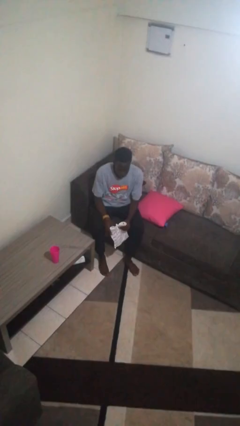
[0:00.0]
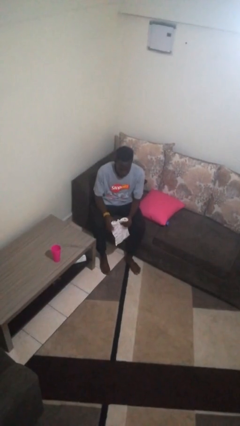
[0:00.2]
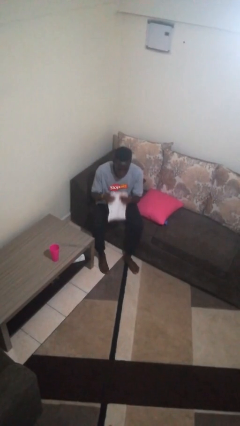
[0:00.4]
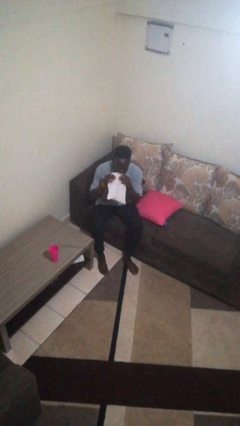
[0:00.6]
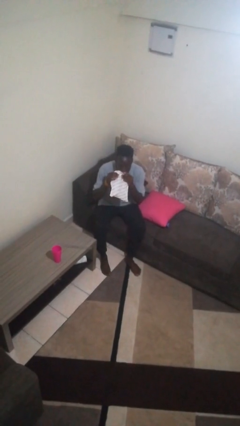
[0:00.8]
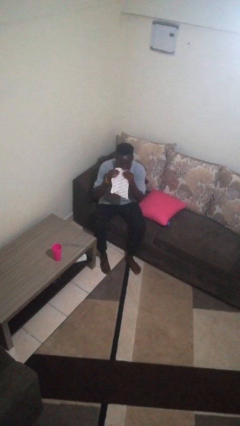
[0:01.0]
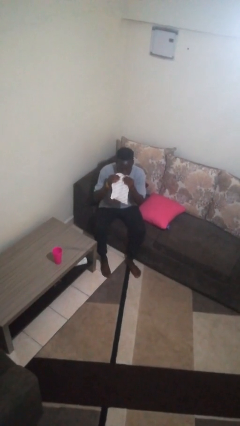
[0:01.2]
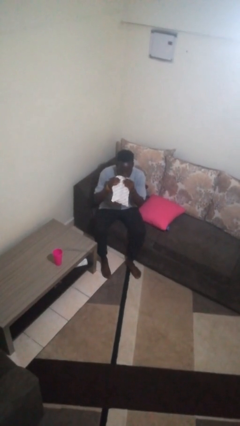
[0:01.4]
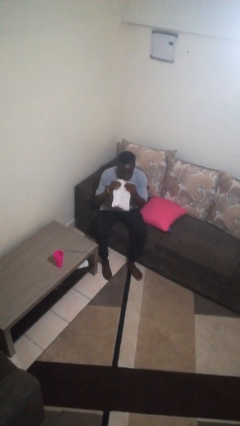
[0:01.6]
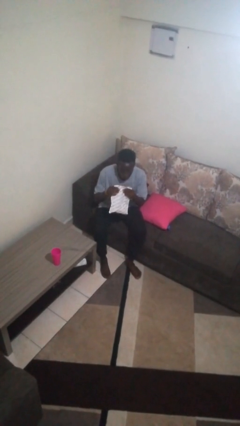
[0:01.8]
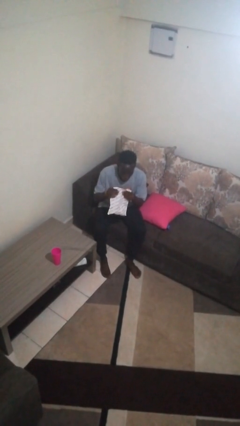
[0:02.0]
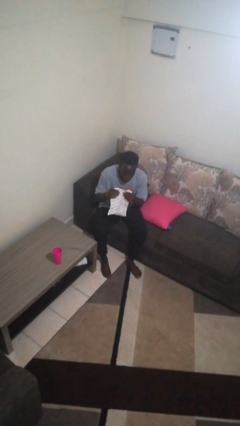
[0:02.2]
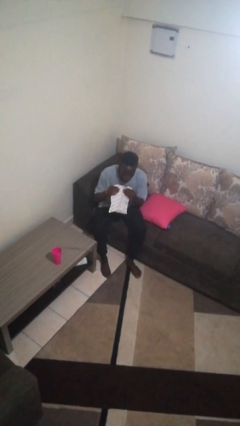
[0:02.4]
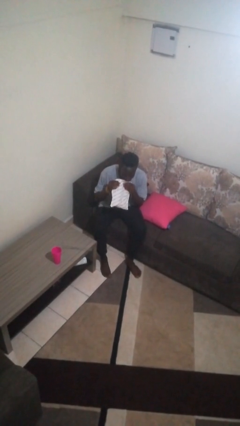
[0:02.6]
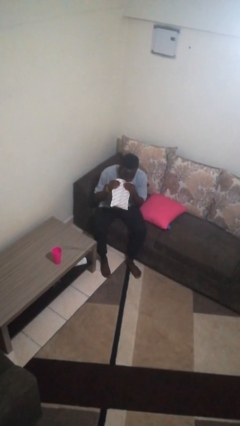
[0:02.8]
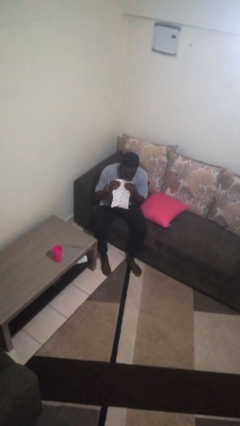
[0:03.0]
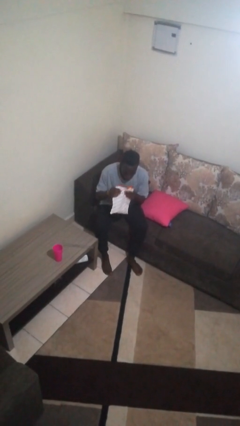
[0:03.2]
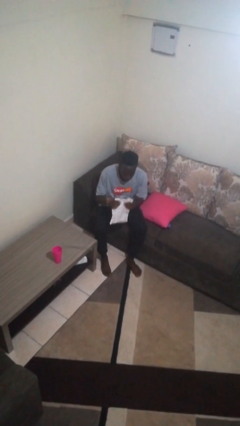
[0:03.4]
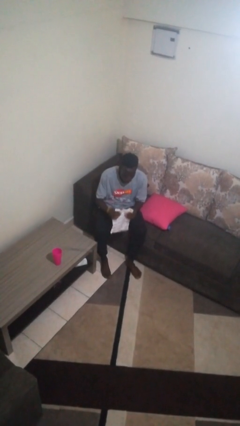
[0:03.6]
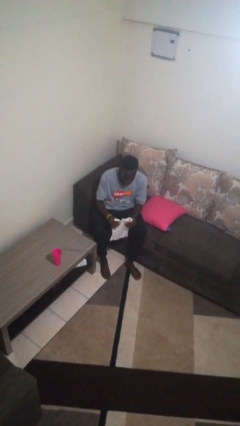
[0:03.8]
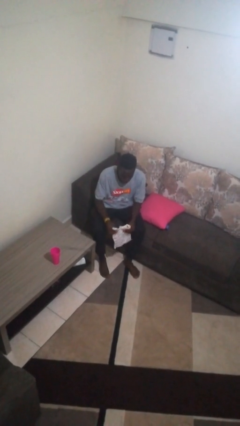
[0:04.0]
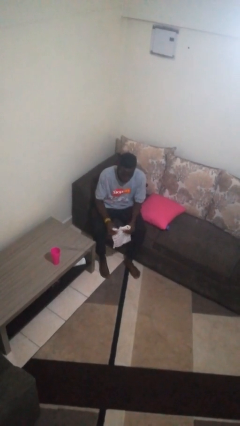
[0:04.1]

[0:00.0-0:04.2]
person eats snack from bag

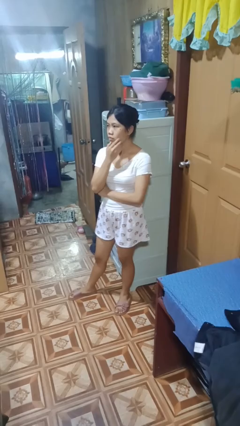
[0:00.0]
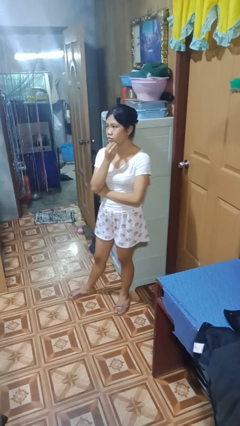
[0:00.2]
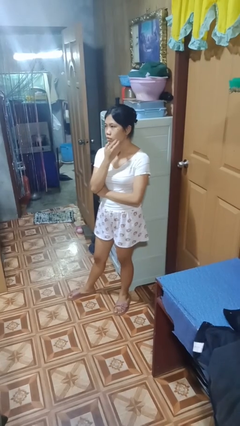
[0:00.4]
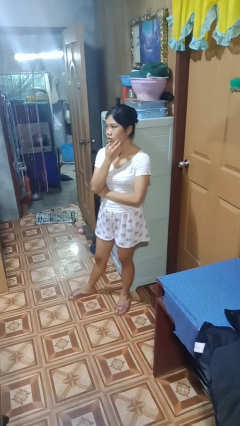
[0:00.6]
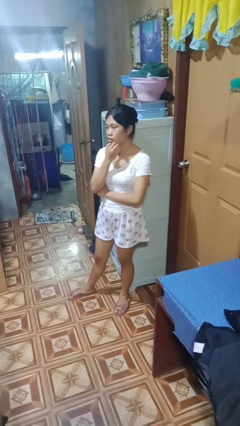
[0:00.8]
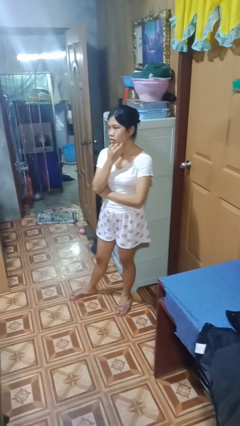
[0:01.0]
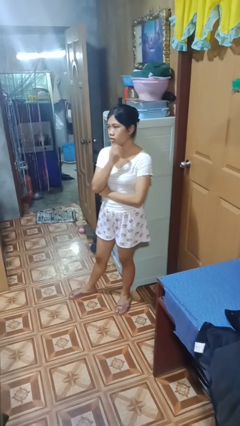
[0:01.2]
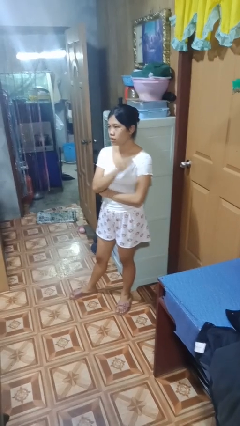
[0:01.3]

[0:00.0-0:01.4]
person strokes chin

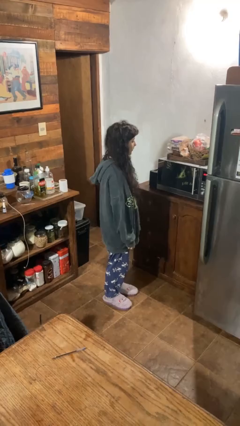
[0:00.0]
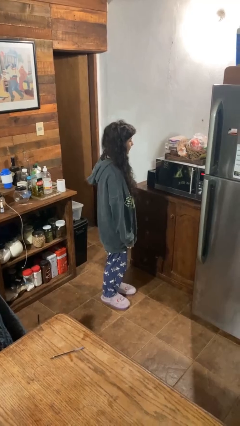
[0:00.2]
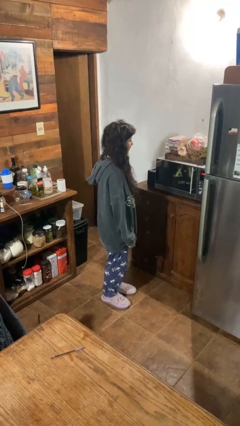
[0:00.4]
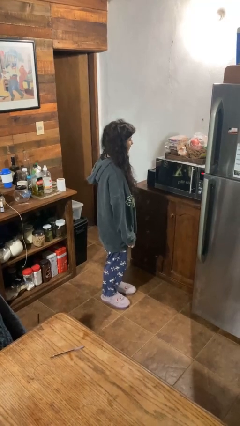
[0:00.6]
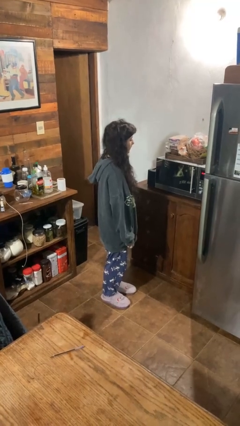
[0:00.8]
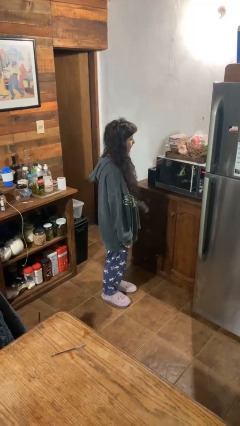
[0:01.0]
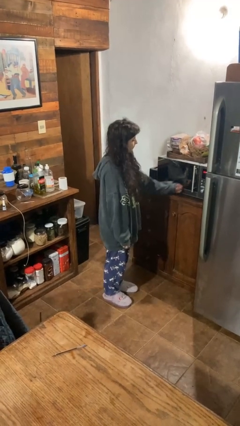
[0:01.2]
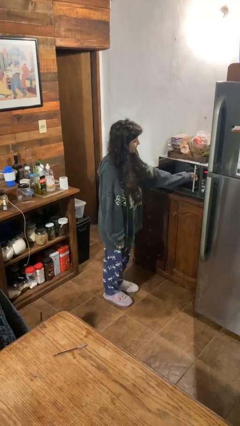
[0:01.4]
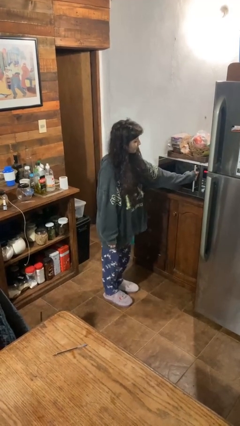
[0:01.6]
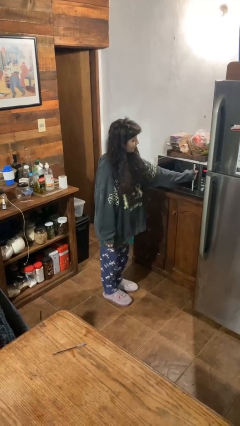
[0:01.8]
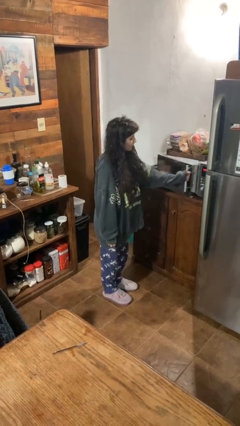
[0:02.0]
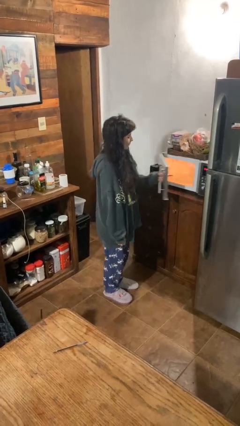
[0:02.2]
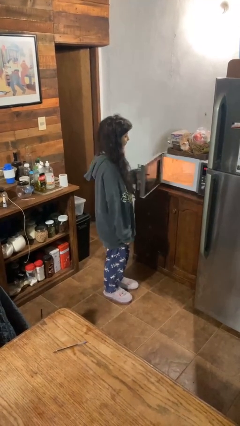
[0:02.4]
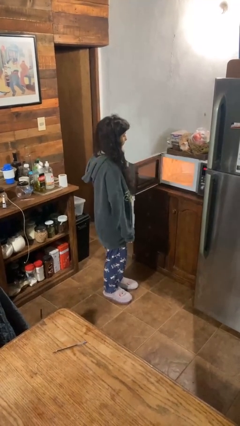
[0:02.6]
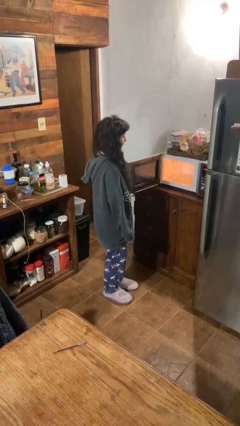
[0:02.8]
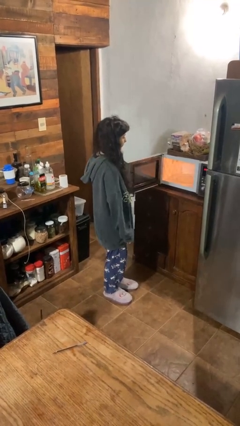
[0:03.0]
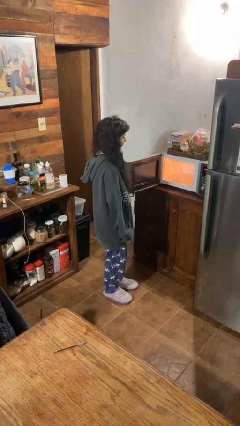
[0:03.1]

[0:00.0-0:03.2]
person opens microwave

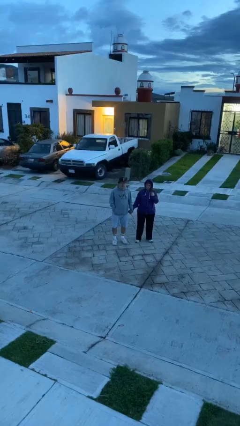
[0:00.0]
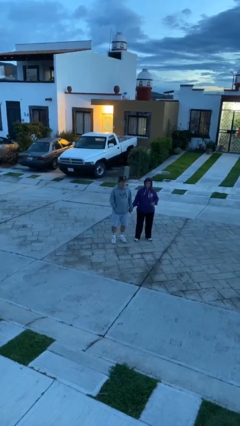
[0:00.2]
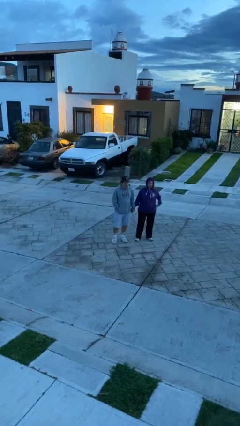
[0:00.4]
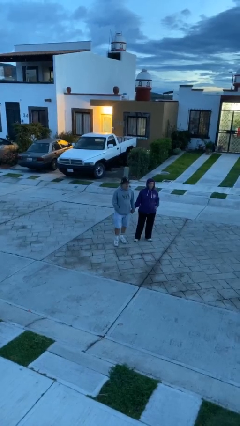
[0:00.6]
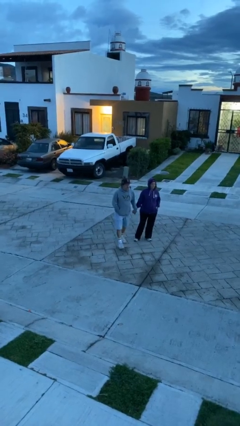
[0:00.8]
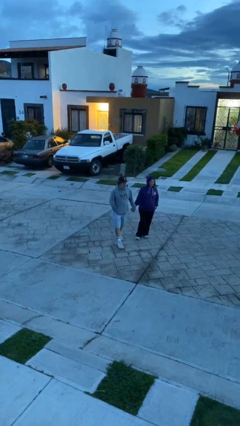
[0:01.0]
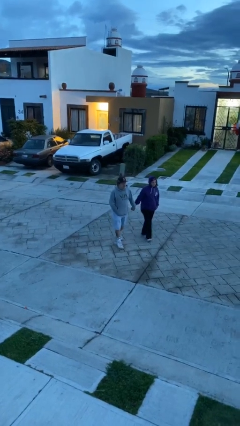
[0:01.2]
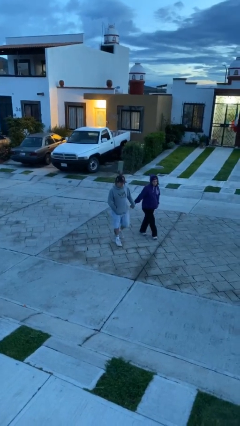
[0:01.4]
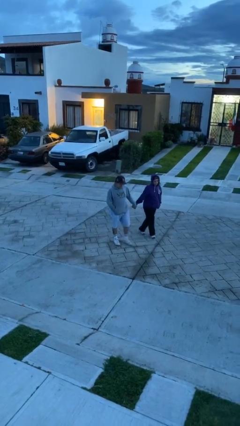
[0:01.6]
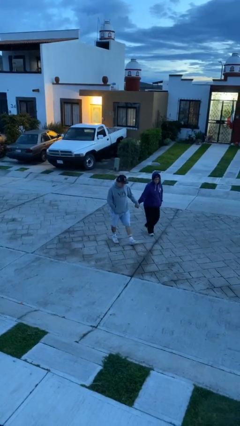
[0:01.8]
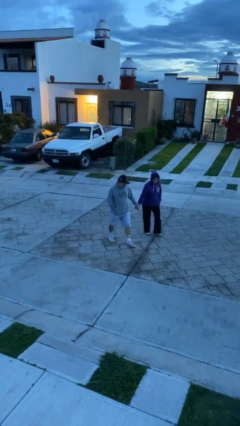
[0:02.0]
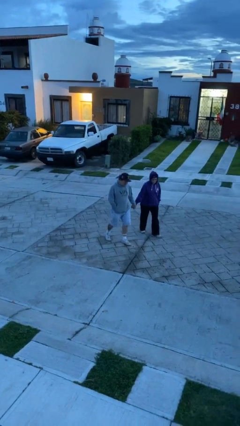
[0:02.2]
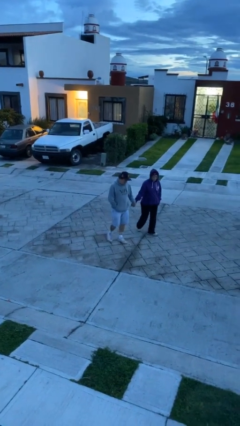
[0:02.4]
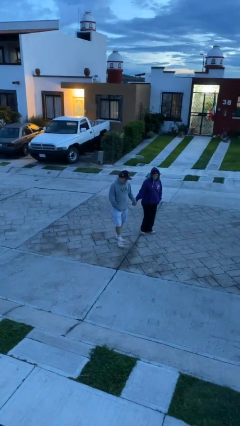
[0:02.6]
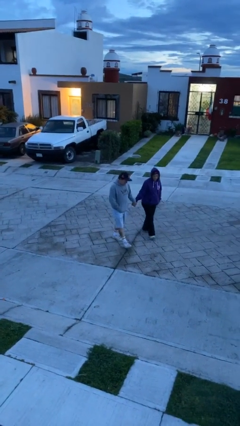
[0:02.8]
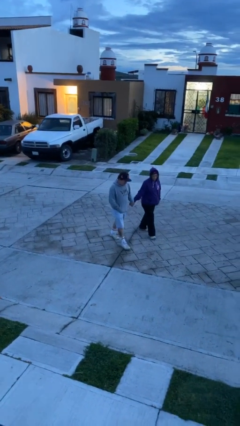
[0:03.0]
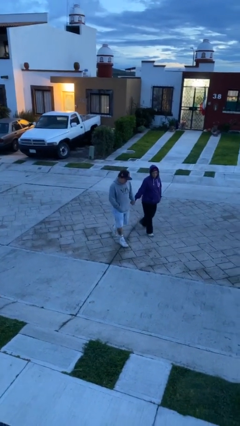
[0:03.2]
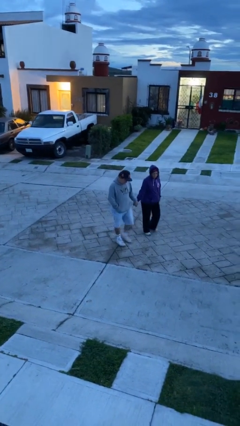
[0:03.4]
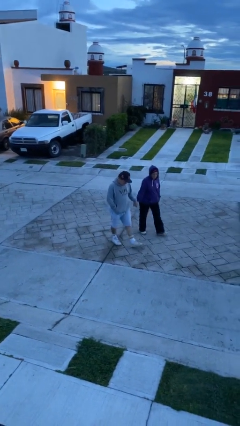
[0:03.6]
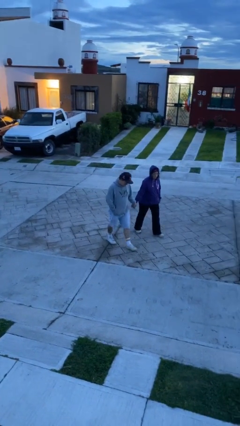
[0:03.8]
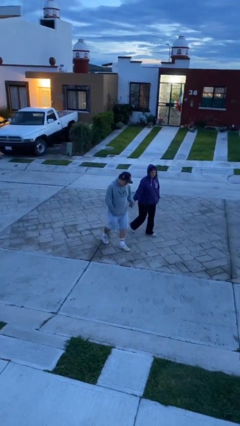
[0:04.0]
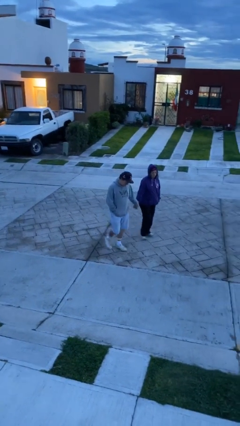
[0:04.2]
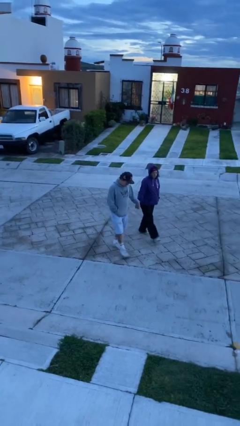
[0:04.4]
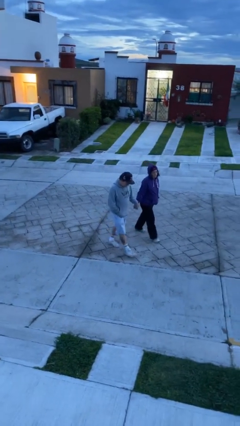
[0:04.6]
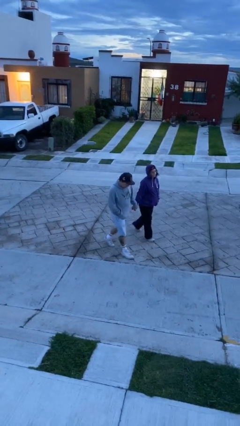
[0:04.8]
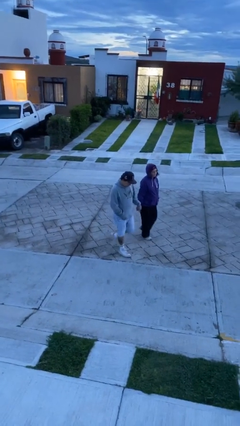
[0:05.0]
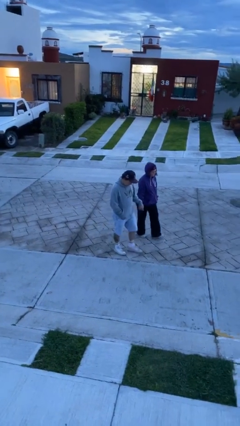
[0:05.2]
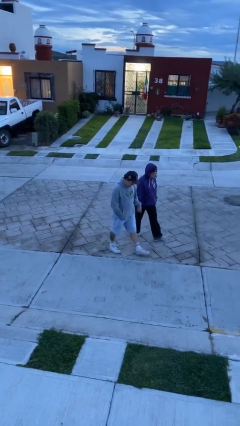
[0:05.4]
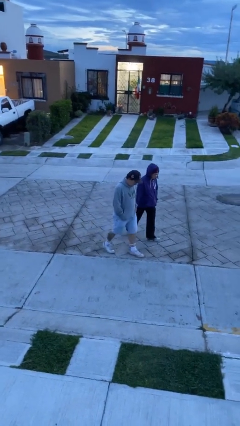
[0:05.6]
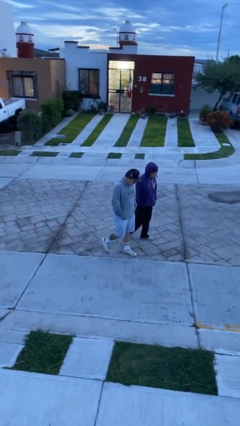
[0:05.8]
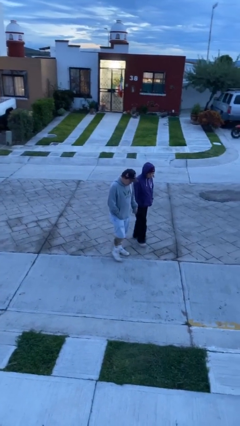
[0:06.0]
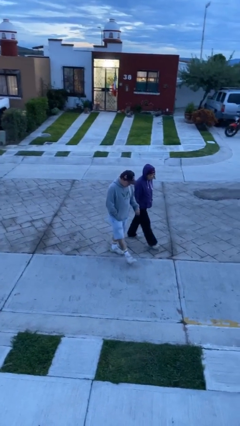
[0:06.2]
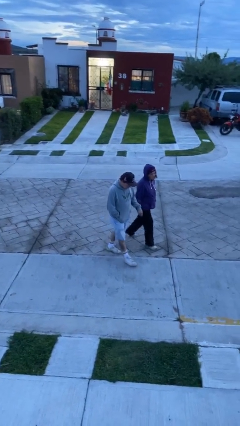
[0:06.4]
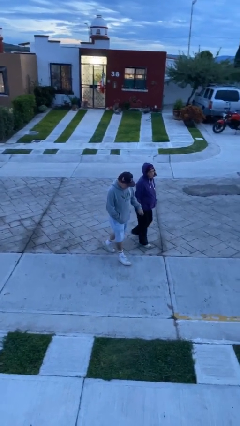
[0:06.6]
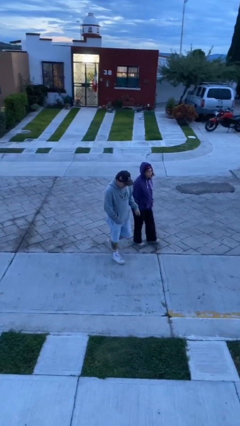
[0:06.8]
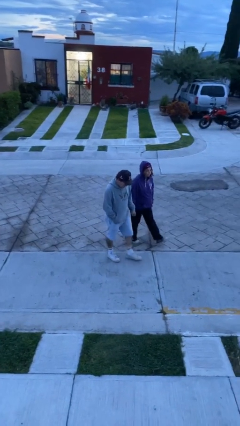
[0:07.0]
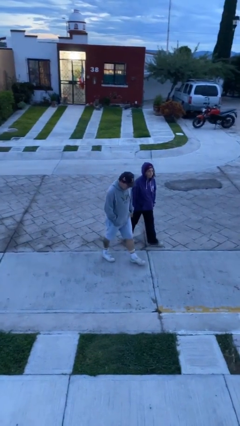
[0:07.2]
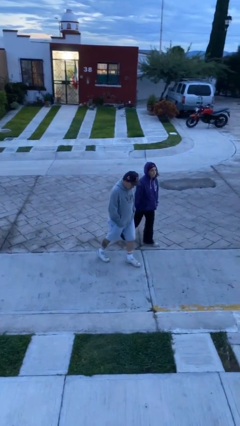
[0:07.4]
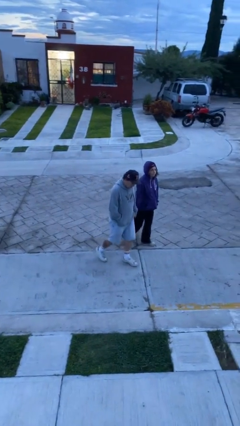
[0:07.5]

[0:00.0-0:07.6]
person holds hand

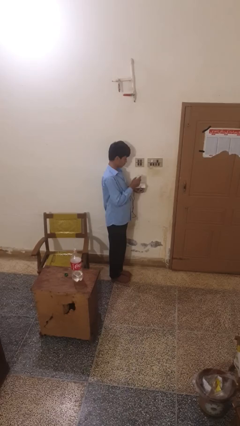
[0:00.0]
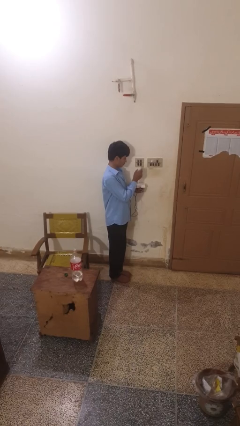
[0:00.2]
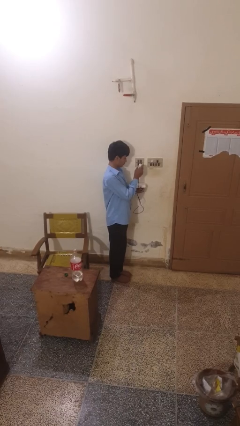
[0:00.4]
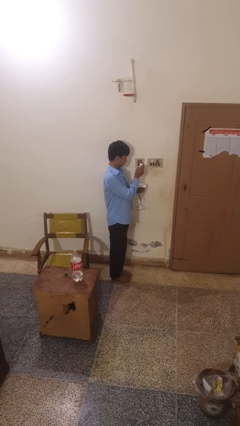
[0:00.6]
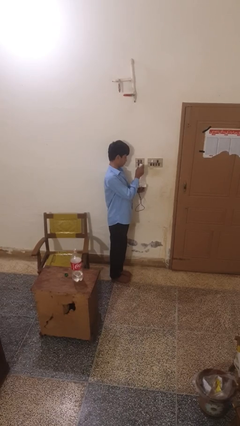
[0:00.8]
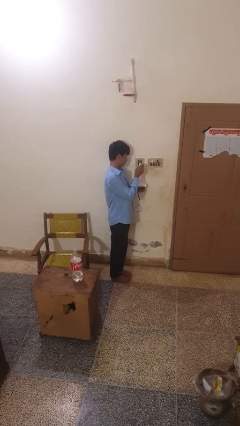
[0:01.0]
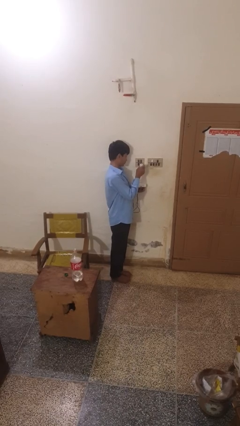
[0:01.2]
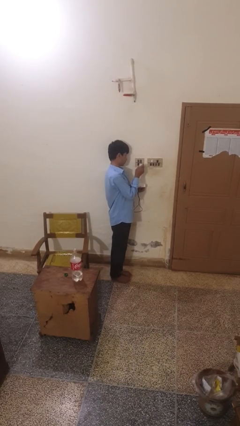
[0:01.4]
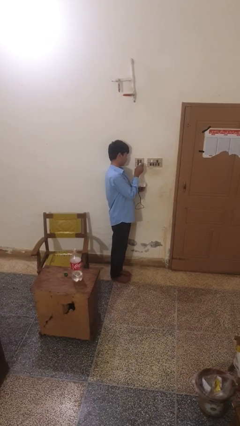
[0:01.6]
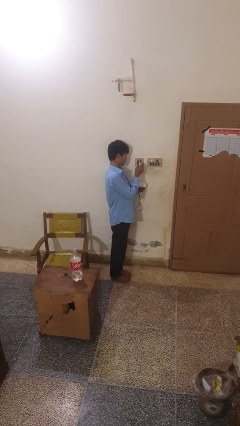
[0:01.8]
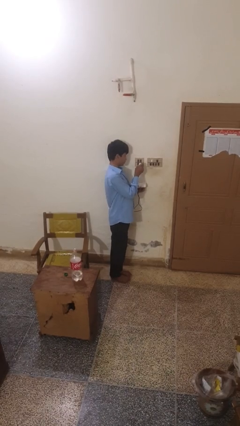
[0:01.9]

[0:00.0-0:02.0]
person plugs into electrical socket
